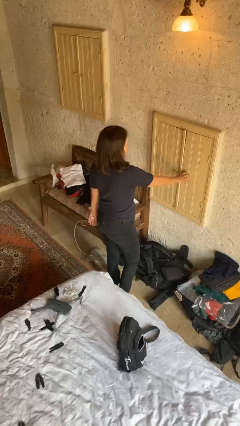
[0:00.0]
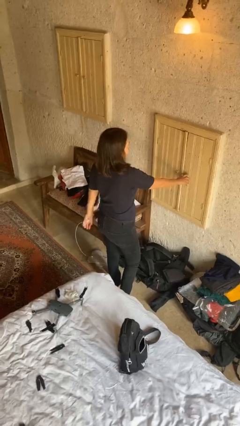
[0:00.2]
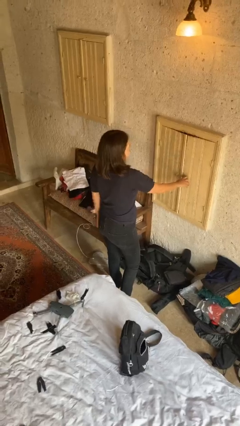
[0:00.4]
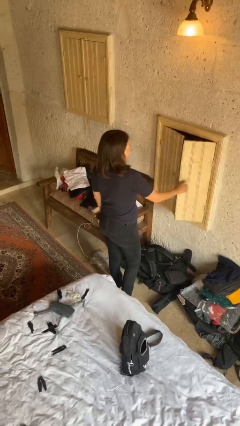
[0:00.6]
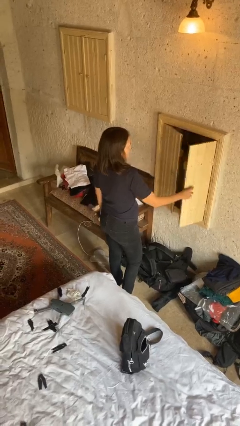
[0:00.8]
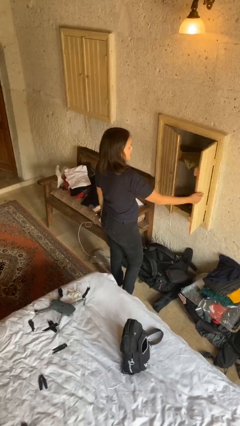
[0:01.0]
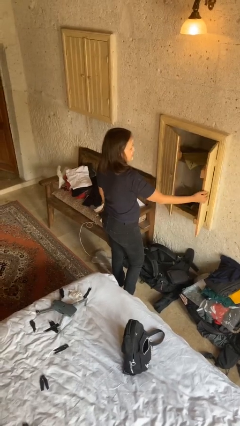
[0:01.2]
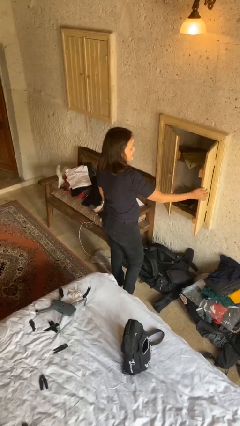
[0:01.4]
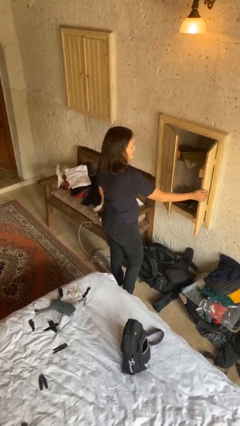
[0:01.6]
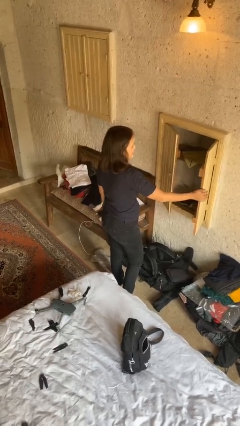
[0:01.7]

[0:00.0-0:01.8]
person opens closet door

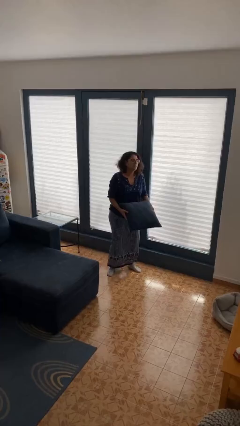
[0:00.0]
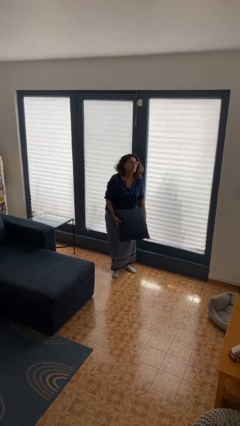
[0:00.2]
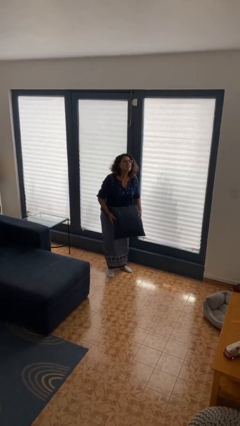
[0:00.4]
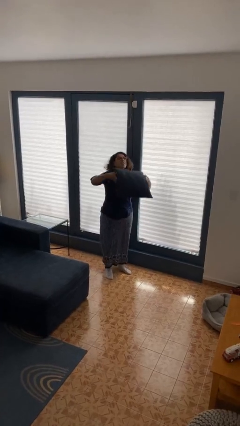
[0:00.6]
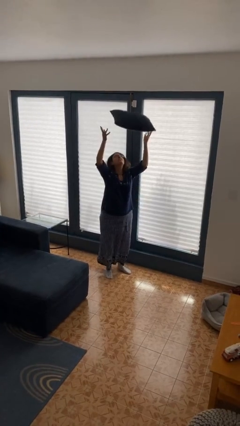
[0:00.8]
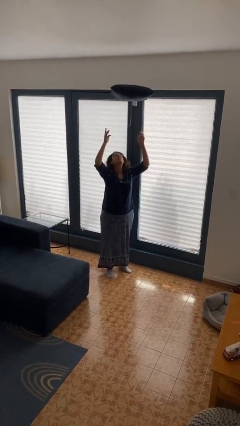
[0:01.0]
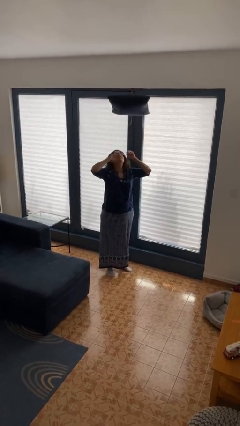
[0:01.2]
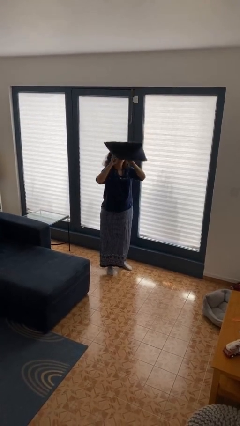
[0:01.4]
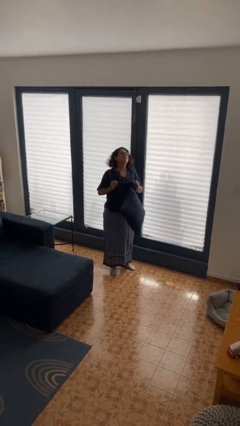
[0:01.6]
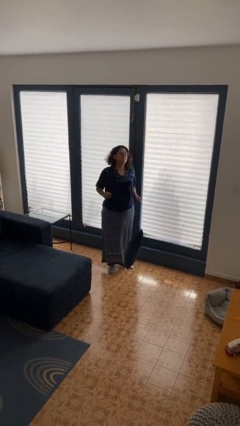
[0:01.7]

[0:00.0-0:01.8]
person throws object into air

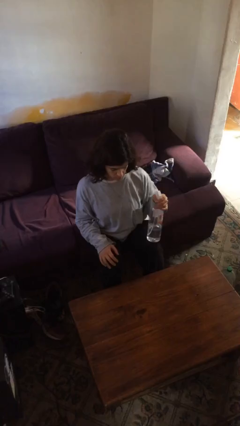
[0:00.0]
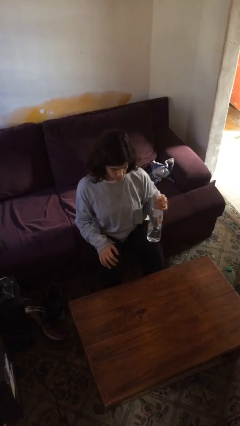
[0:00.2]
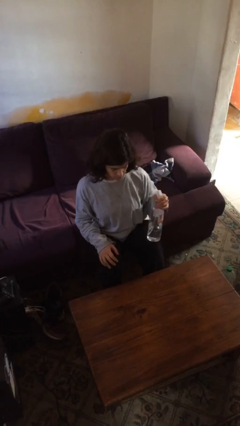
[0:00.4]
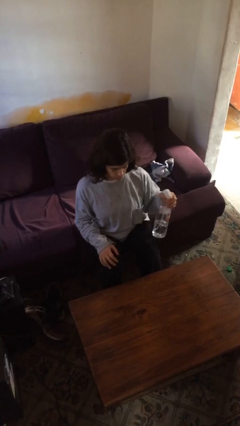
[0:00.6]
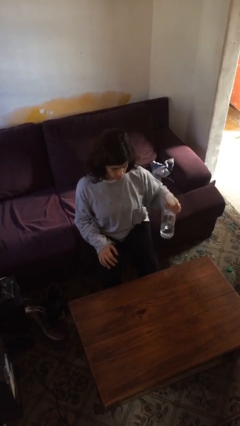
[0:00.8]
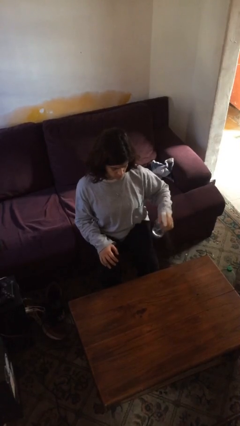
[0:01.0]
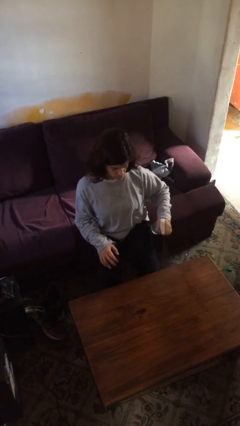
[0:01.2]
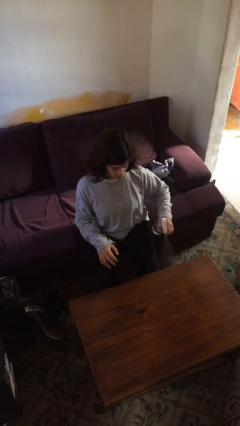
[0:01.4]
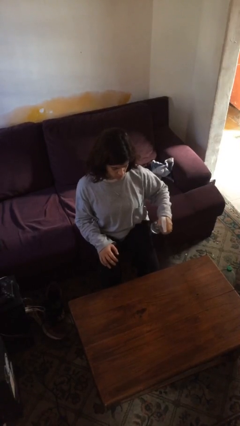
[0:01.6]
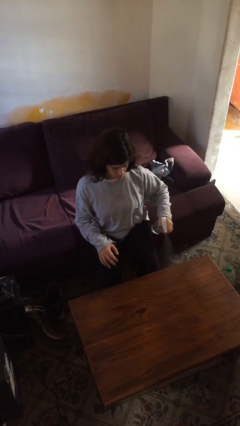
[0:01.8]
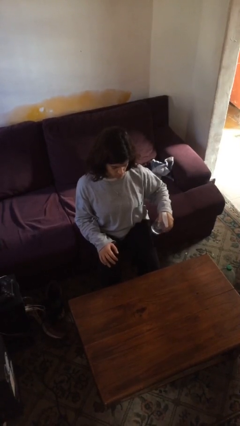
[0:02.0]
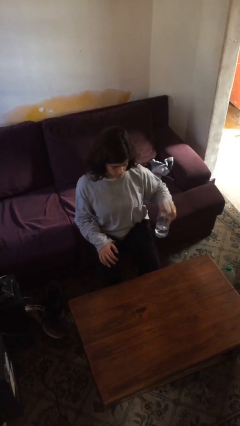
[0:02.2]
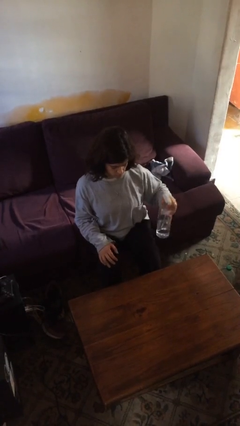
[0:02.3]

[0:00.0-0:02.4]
person sprays from bottle

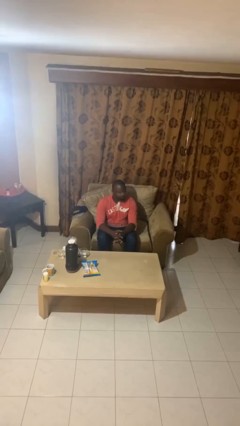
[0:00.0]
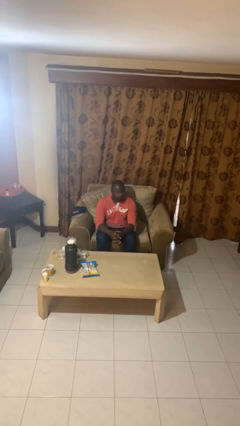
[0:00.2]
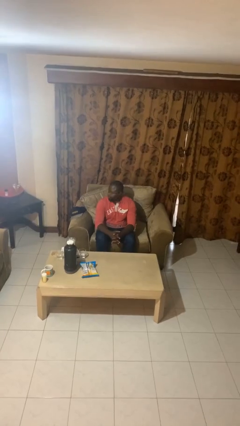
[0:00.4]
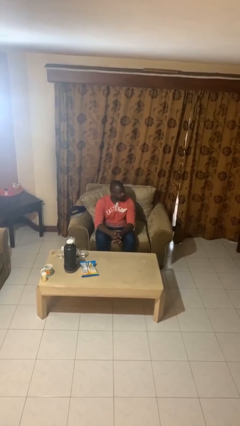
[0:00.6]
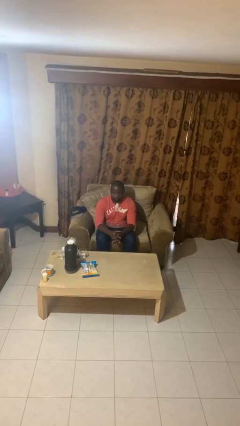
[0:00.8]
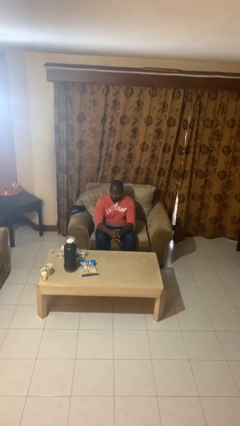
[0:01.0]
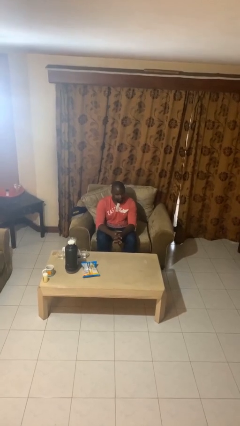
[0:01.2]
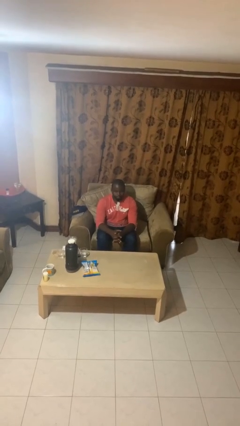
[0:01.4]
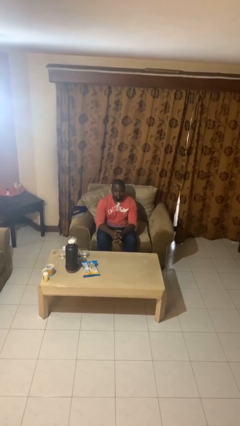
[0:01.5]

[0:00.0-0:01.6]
person shakes head

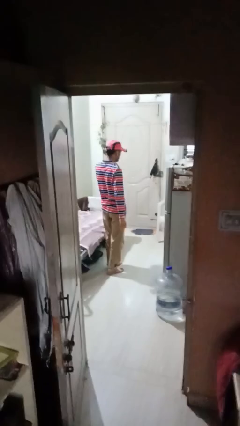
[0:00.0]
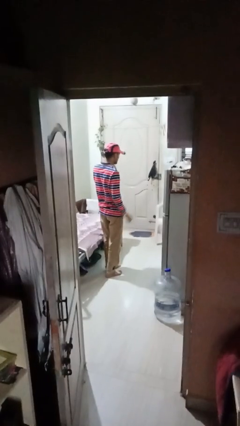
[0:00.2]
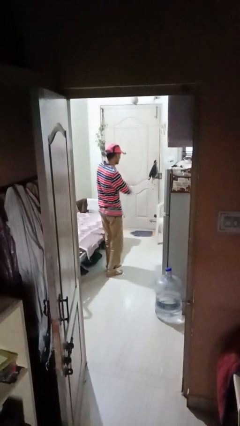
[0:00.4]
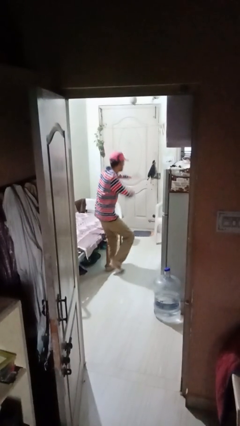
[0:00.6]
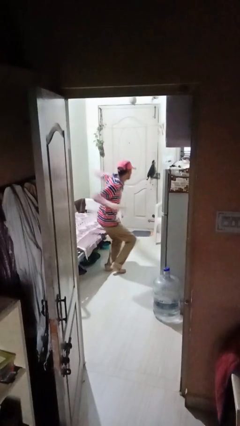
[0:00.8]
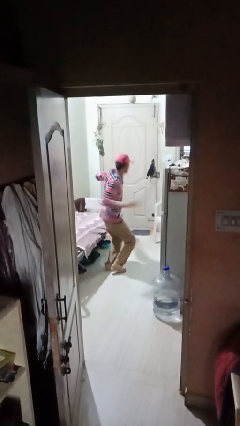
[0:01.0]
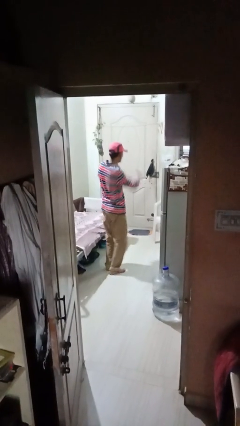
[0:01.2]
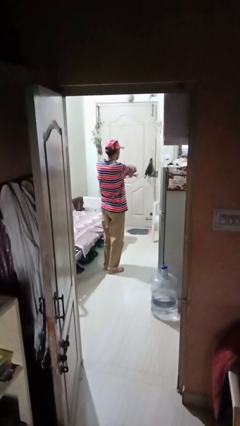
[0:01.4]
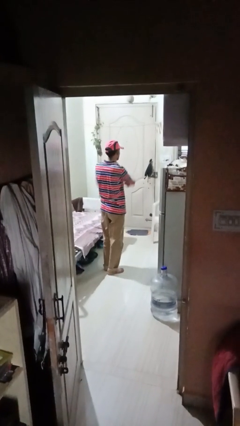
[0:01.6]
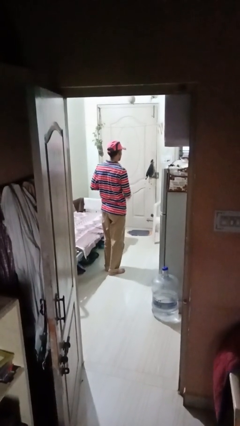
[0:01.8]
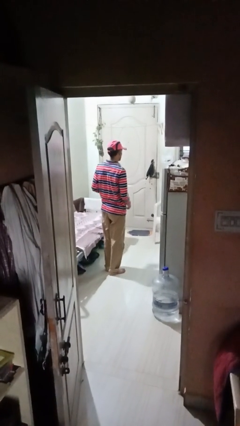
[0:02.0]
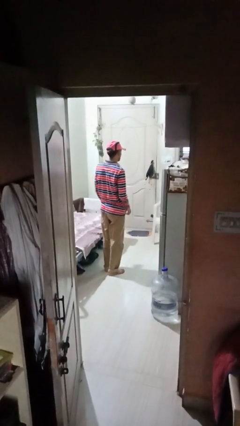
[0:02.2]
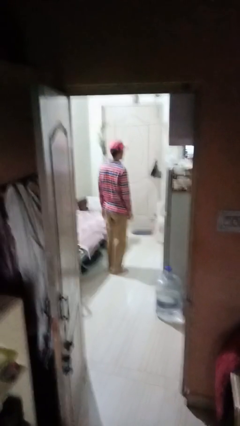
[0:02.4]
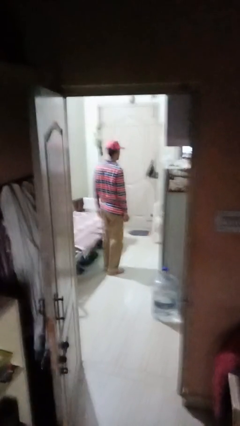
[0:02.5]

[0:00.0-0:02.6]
person karate chop

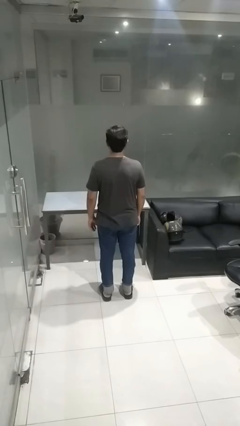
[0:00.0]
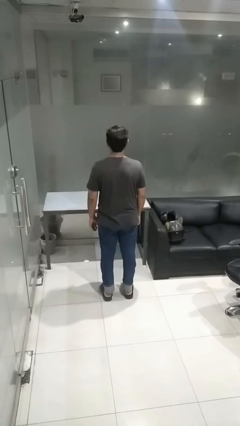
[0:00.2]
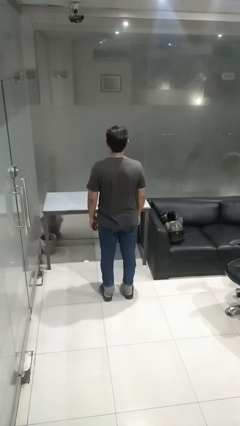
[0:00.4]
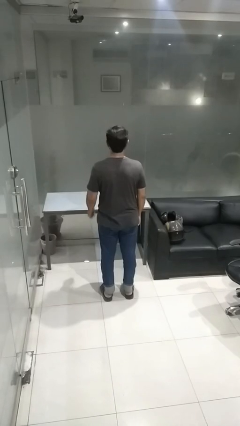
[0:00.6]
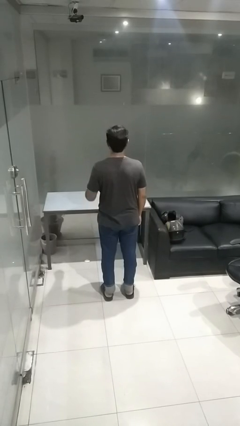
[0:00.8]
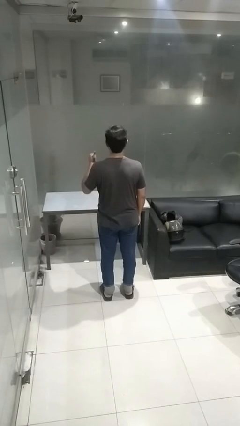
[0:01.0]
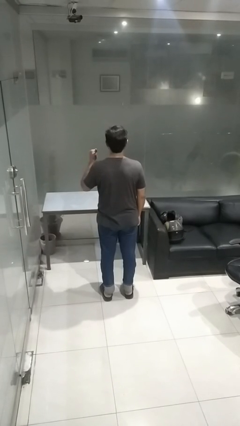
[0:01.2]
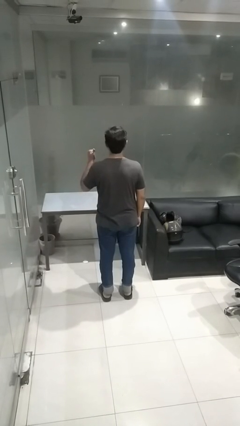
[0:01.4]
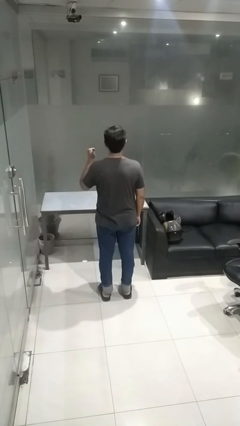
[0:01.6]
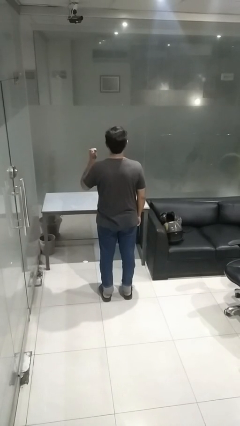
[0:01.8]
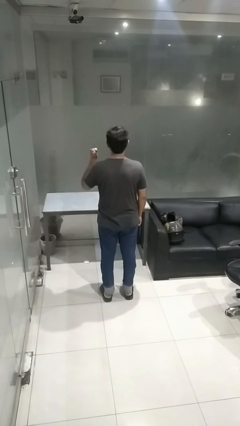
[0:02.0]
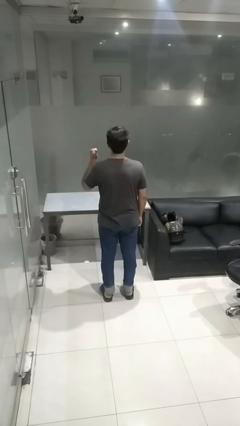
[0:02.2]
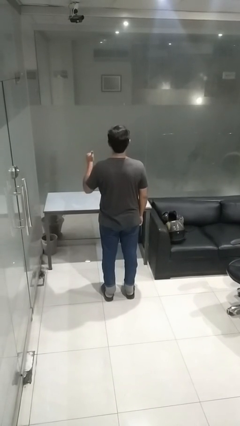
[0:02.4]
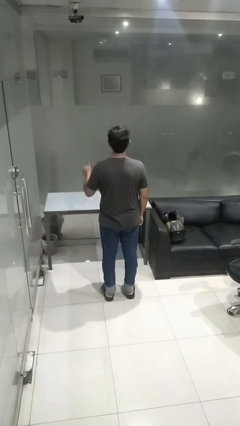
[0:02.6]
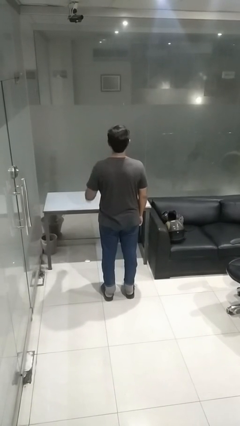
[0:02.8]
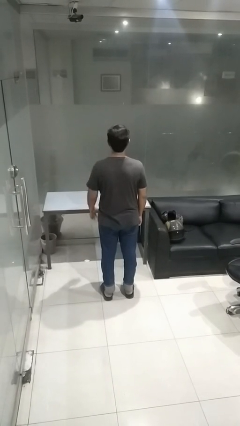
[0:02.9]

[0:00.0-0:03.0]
person gestures behind me

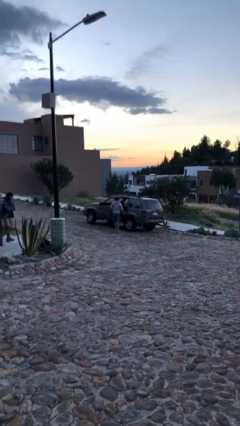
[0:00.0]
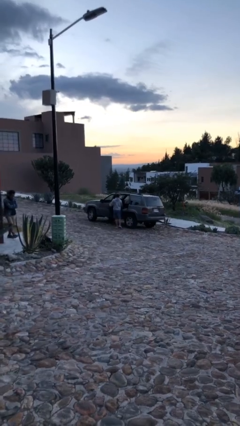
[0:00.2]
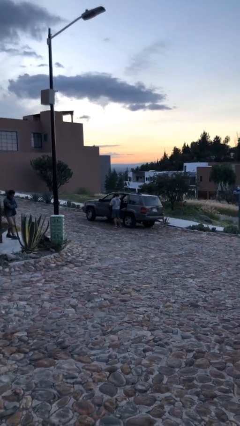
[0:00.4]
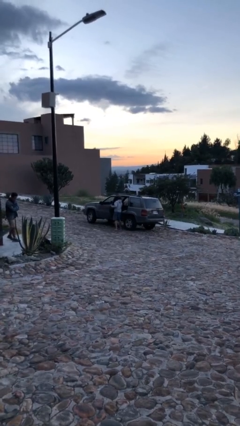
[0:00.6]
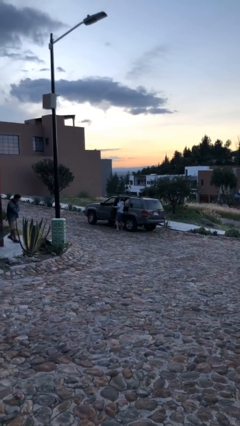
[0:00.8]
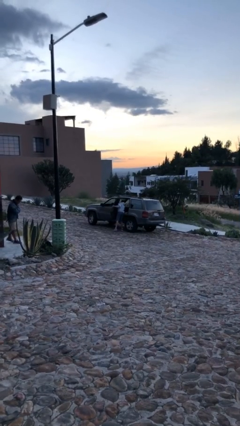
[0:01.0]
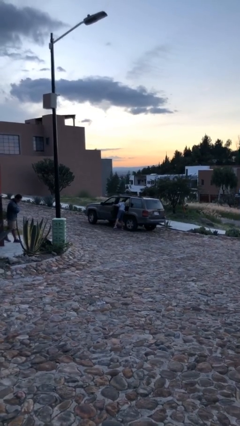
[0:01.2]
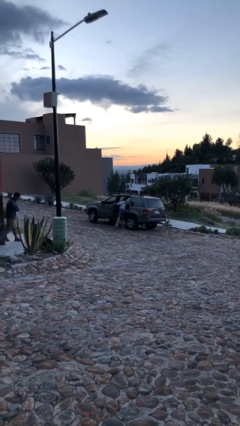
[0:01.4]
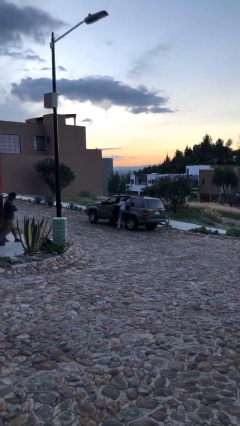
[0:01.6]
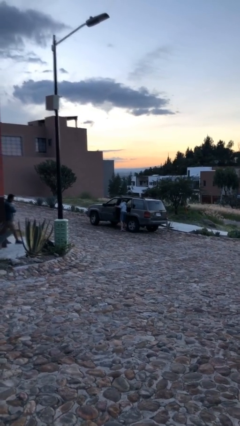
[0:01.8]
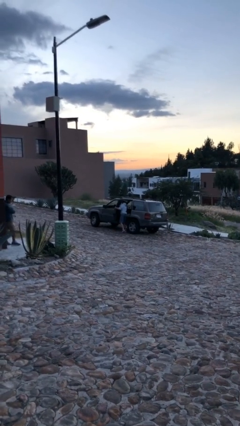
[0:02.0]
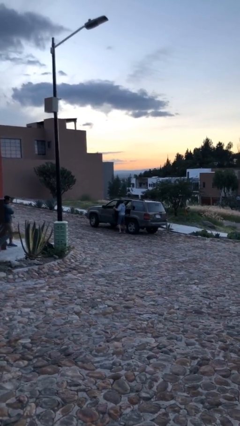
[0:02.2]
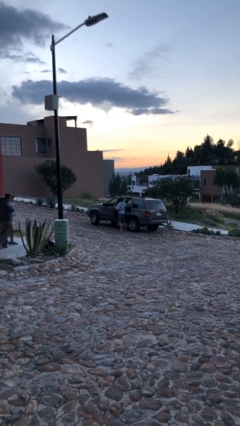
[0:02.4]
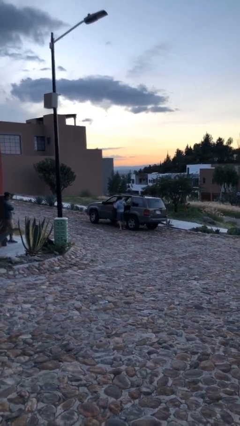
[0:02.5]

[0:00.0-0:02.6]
person unloads car

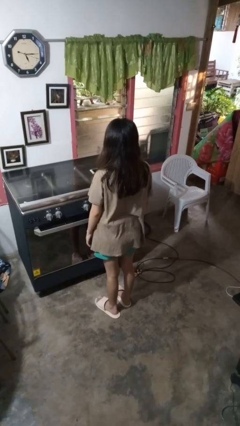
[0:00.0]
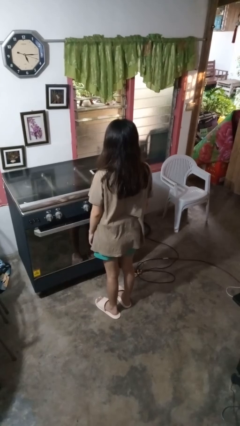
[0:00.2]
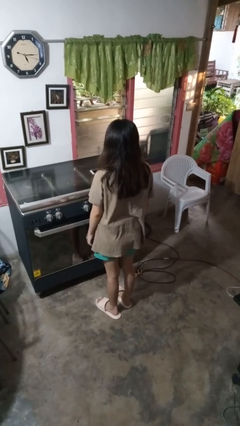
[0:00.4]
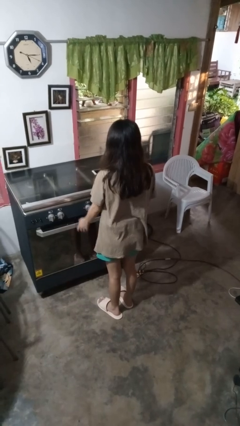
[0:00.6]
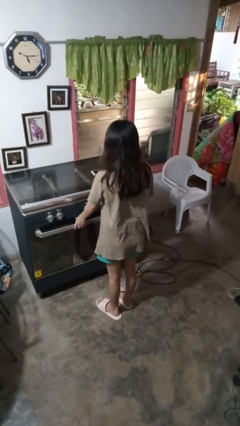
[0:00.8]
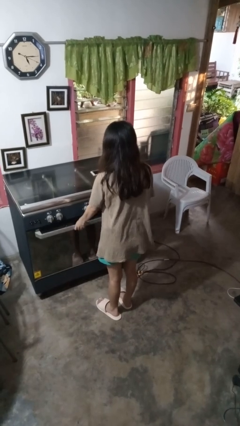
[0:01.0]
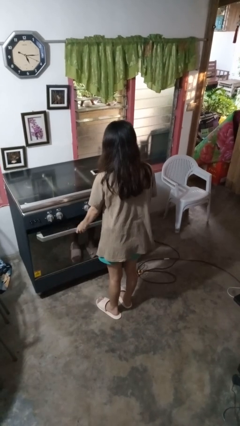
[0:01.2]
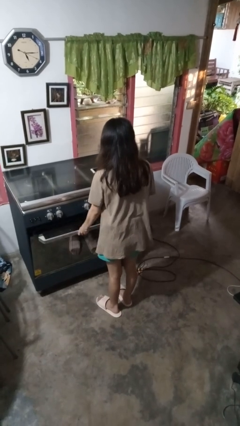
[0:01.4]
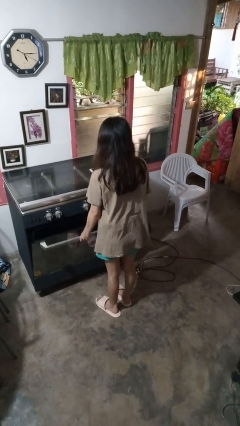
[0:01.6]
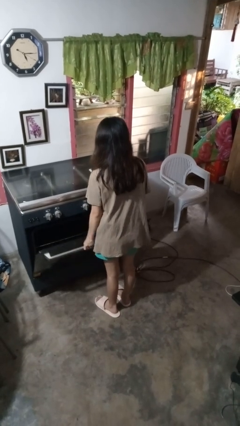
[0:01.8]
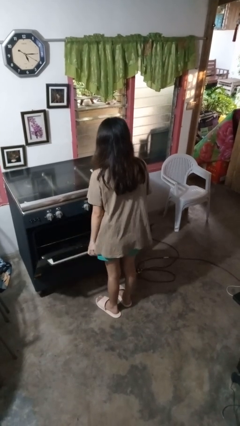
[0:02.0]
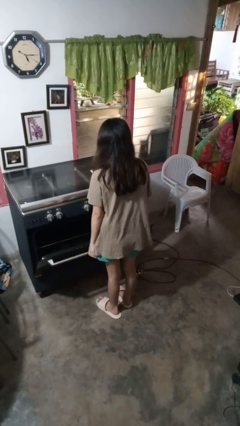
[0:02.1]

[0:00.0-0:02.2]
person opens oven door
